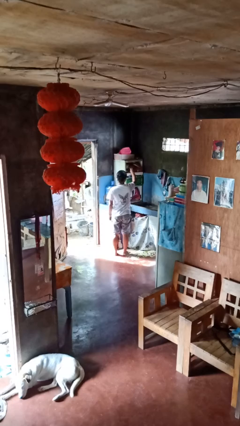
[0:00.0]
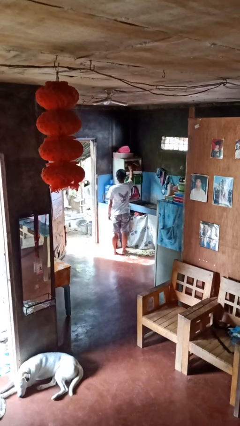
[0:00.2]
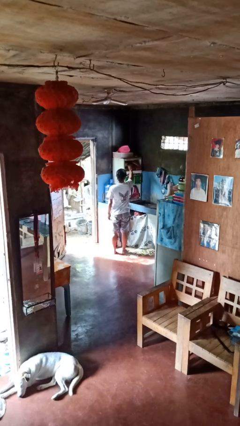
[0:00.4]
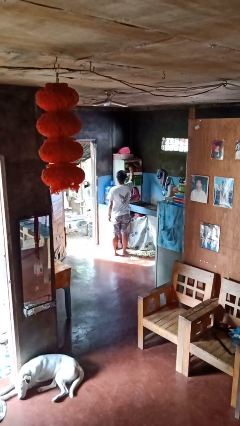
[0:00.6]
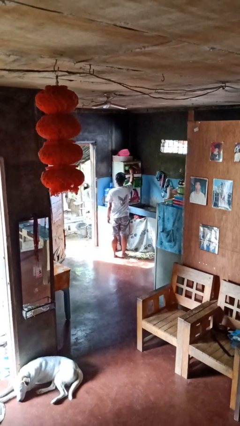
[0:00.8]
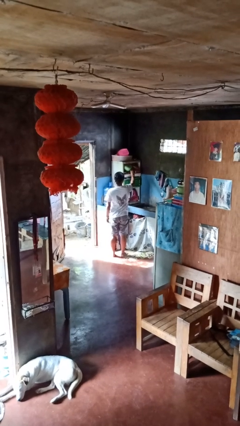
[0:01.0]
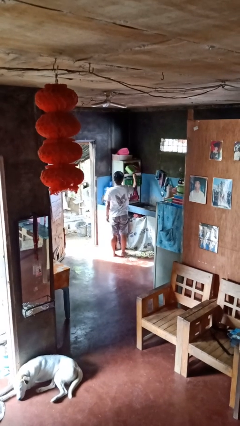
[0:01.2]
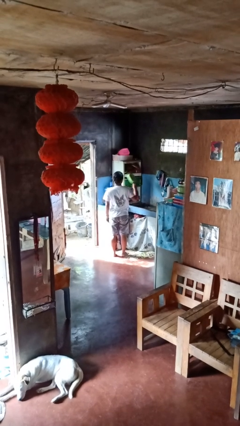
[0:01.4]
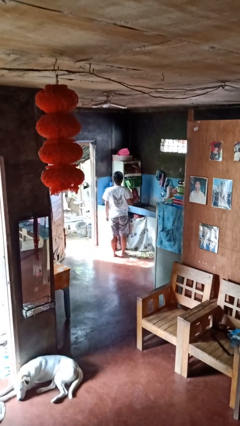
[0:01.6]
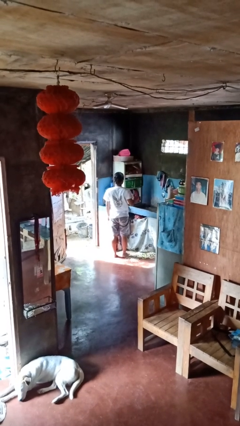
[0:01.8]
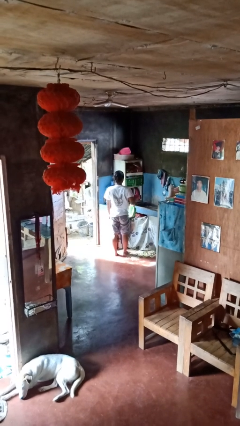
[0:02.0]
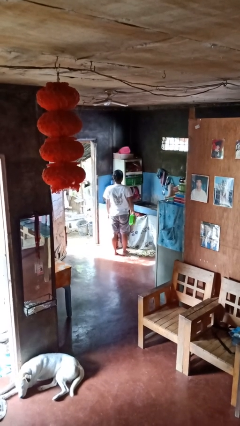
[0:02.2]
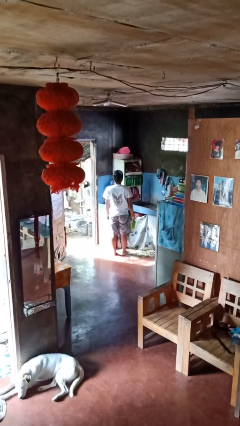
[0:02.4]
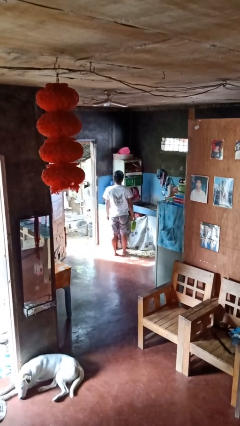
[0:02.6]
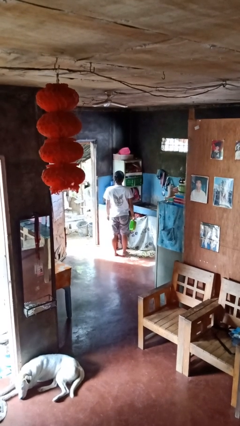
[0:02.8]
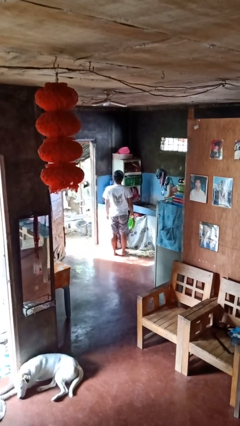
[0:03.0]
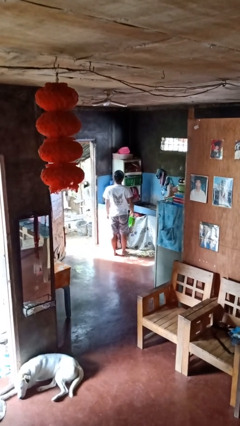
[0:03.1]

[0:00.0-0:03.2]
person takes object from cabinet

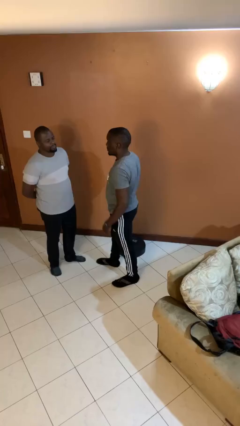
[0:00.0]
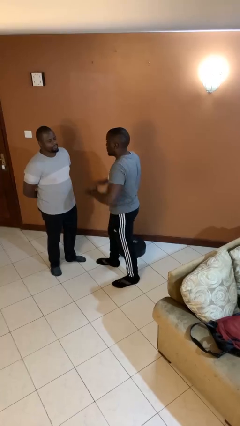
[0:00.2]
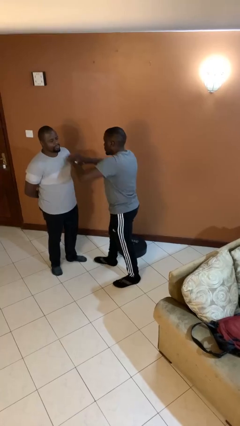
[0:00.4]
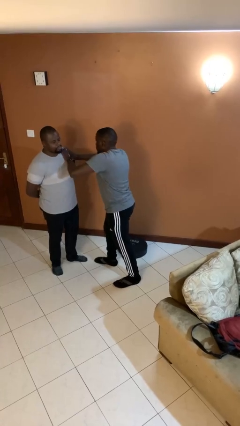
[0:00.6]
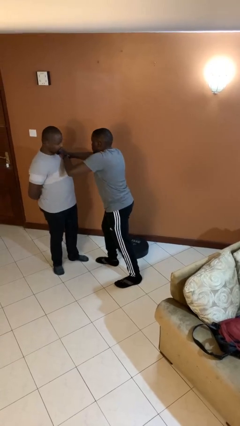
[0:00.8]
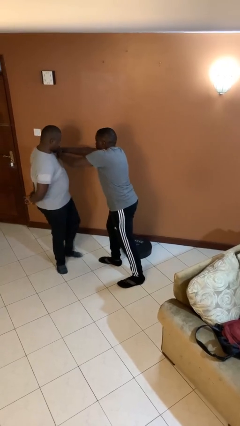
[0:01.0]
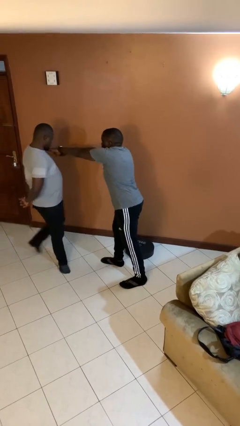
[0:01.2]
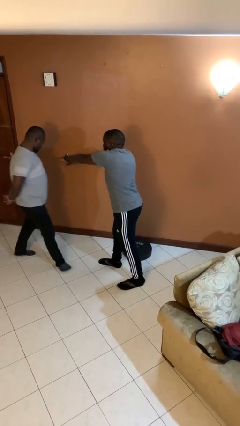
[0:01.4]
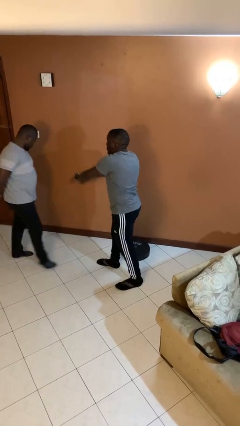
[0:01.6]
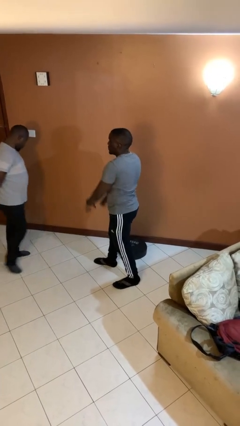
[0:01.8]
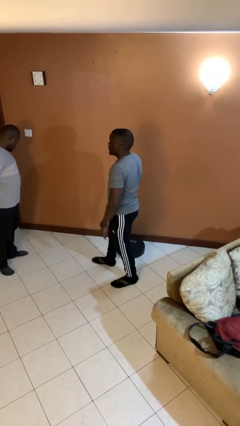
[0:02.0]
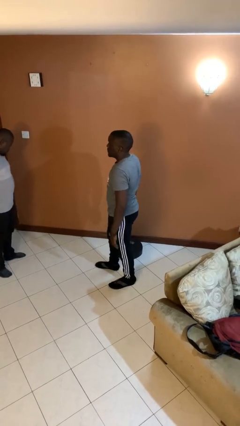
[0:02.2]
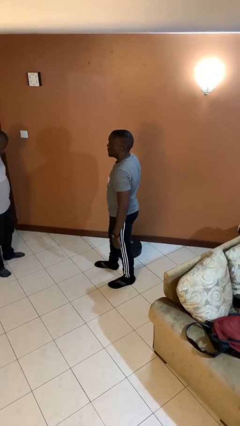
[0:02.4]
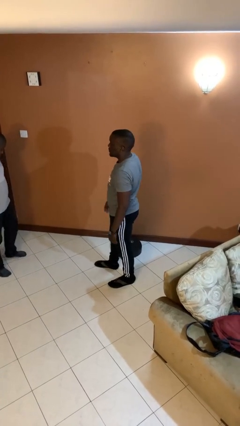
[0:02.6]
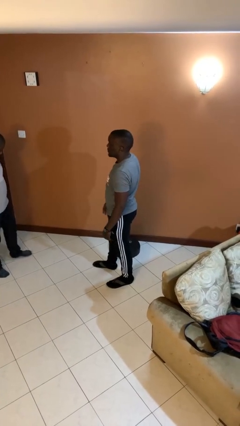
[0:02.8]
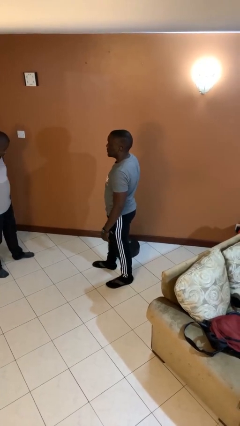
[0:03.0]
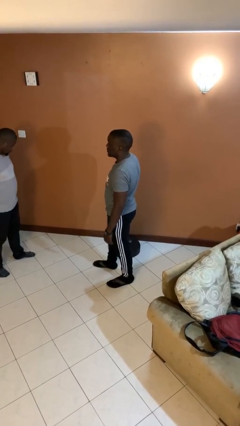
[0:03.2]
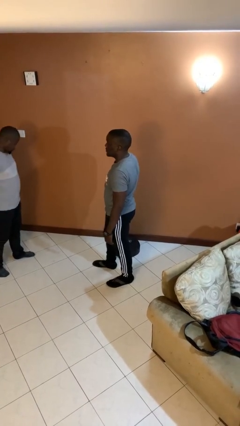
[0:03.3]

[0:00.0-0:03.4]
person shoves person

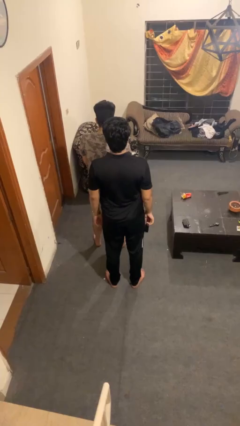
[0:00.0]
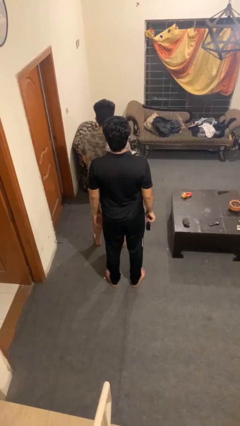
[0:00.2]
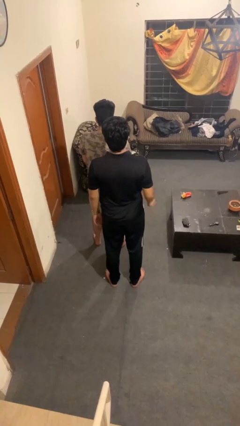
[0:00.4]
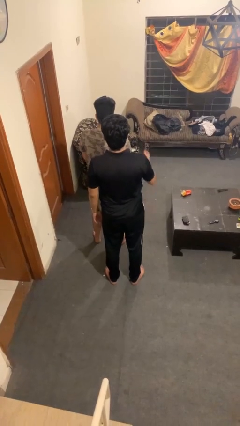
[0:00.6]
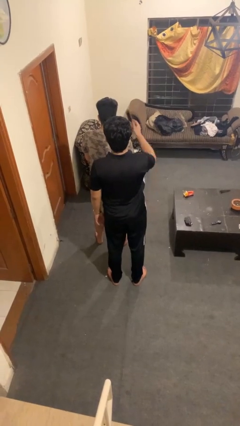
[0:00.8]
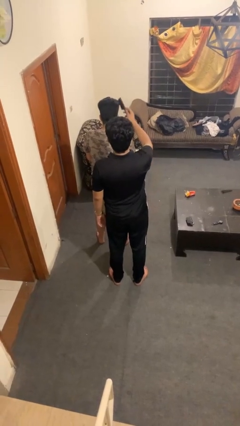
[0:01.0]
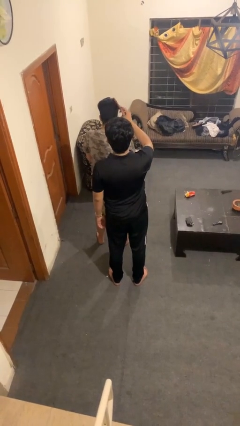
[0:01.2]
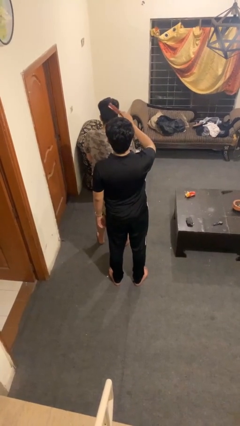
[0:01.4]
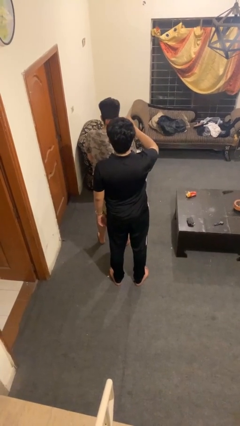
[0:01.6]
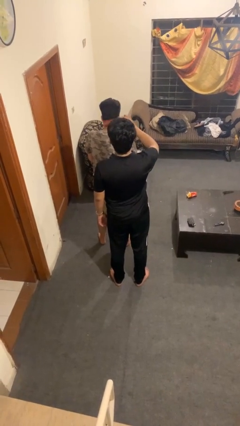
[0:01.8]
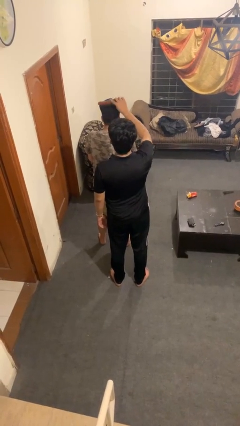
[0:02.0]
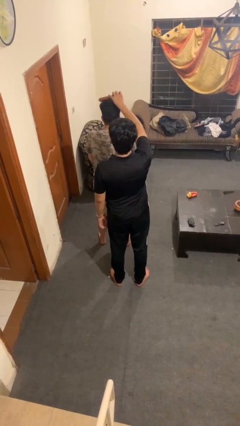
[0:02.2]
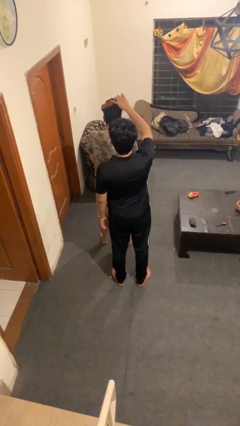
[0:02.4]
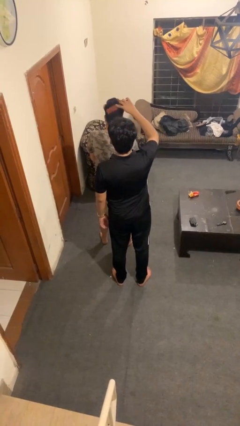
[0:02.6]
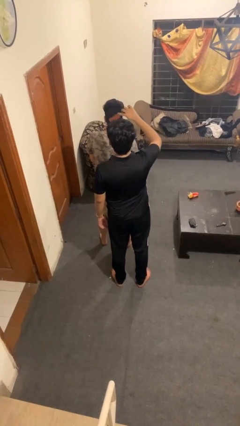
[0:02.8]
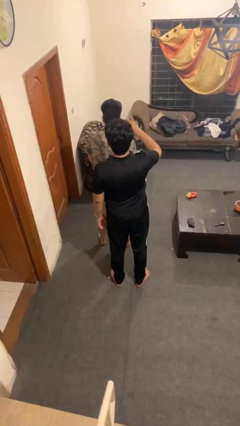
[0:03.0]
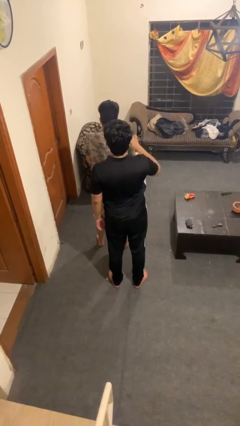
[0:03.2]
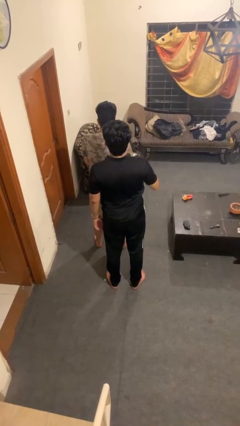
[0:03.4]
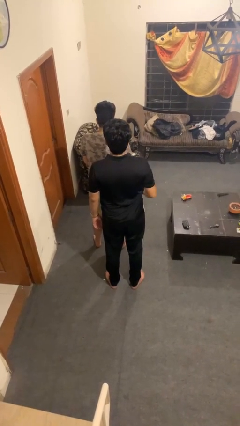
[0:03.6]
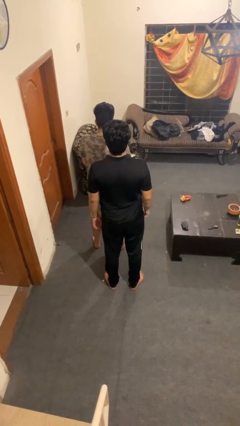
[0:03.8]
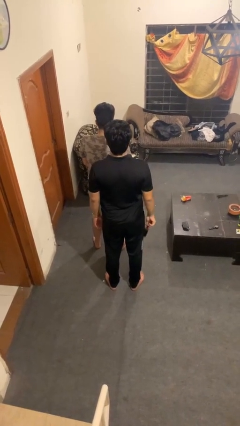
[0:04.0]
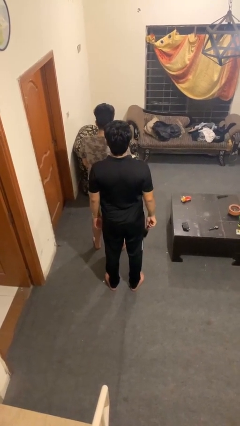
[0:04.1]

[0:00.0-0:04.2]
person brushes hair of person

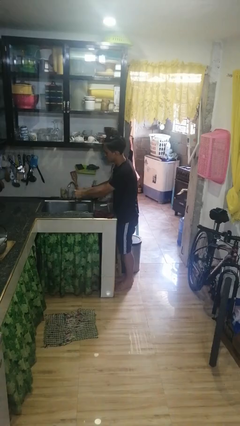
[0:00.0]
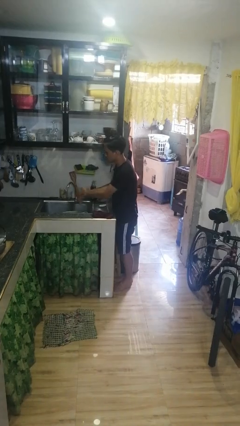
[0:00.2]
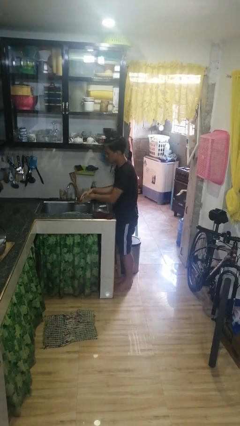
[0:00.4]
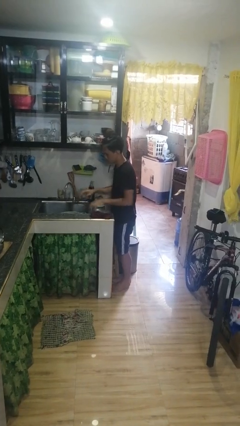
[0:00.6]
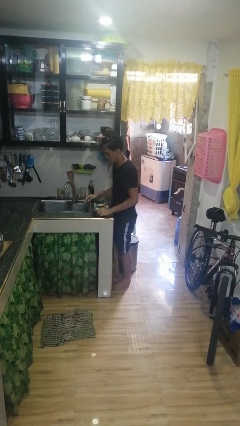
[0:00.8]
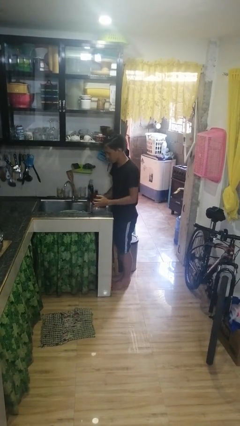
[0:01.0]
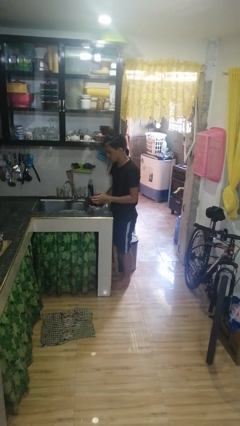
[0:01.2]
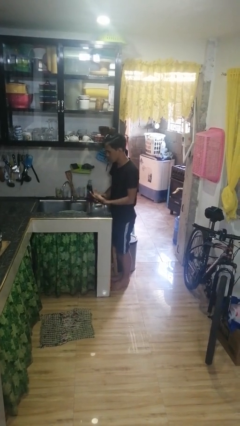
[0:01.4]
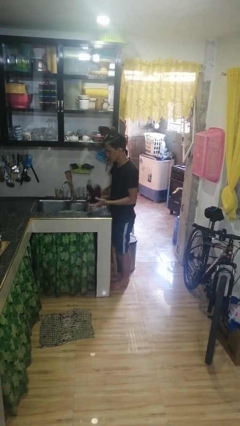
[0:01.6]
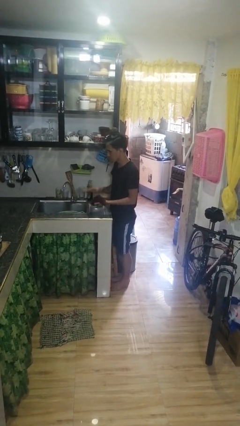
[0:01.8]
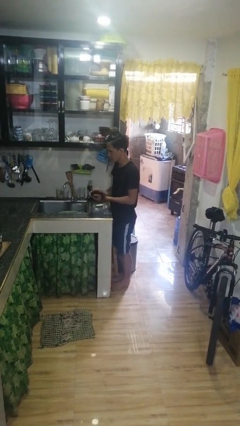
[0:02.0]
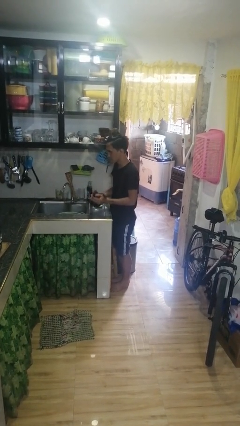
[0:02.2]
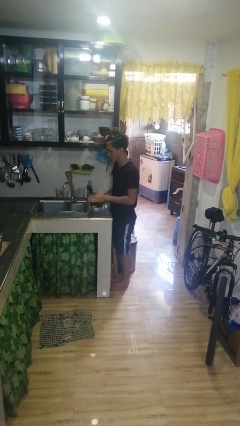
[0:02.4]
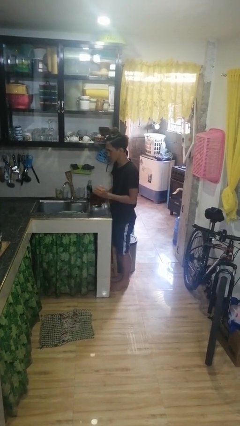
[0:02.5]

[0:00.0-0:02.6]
person dries hands with towel

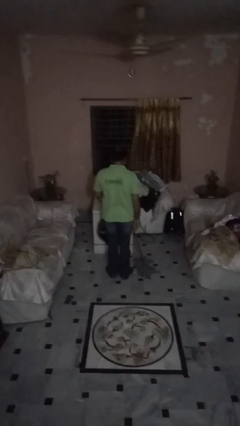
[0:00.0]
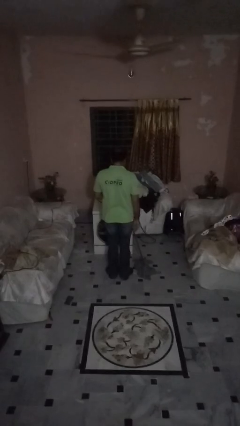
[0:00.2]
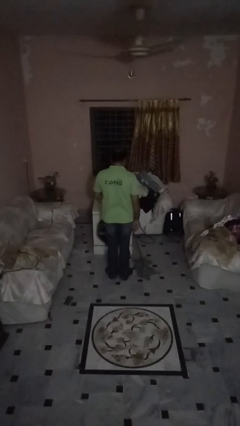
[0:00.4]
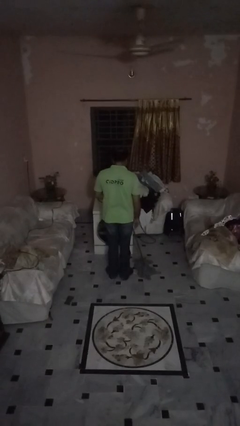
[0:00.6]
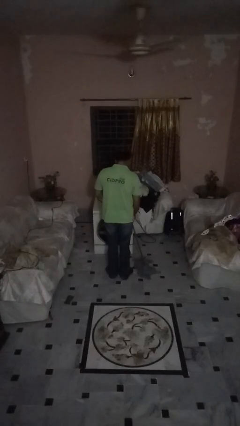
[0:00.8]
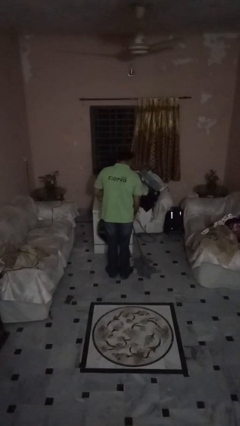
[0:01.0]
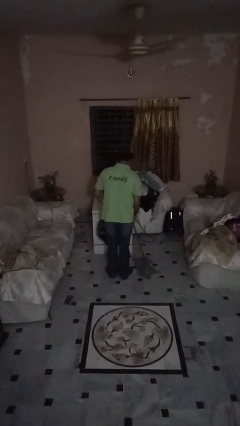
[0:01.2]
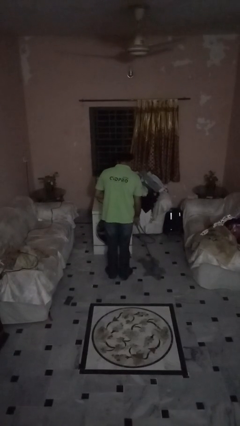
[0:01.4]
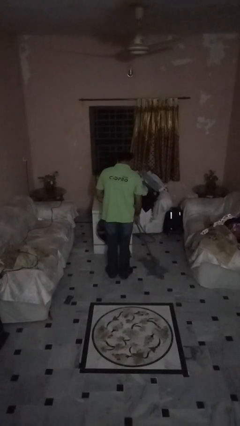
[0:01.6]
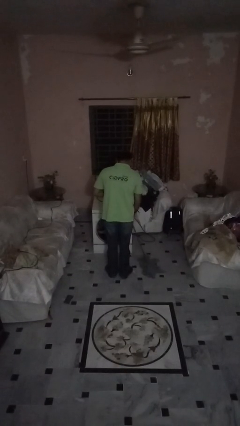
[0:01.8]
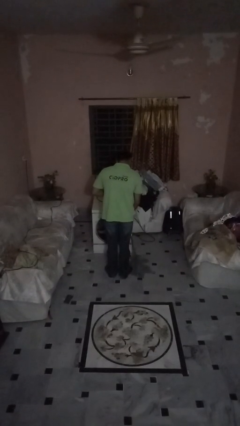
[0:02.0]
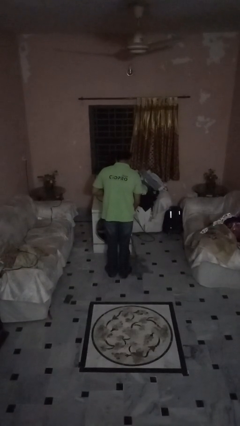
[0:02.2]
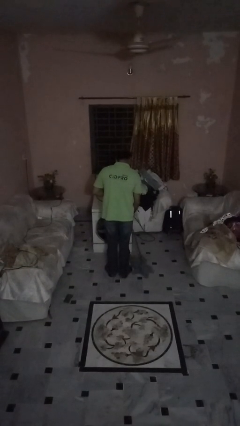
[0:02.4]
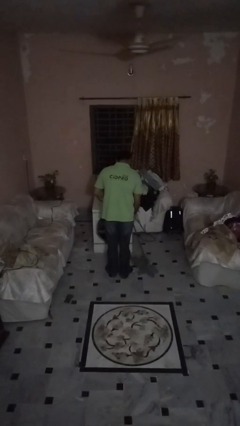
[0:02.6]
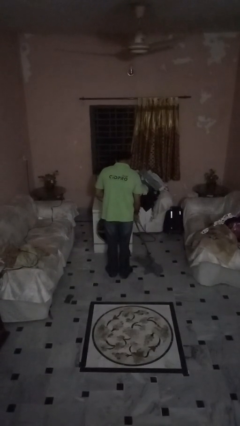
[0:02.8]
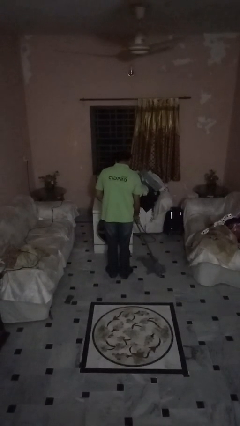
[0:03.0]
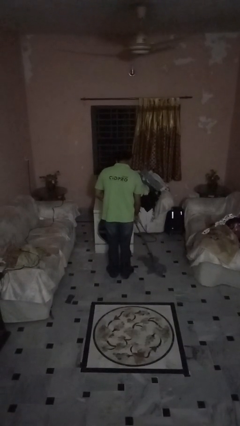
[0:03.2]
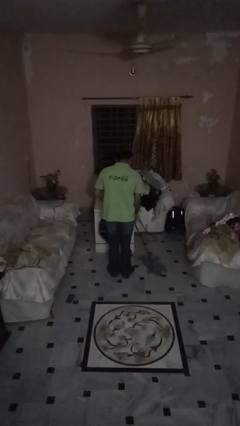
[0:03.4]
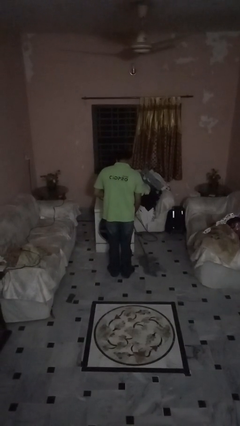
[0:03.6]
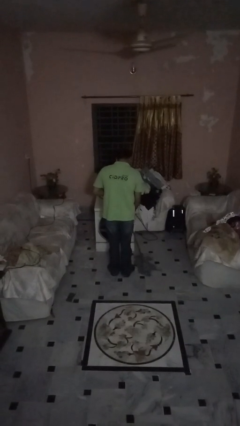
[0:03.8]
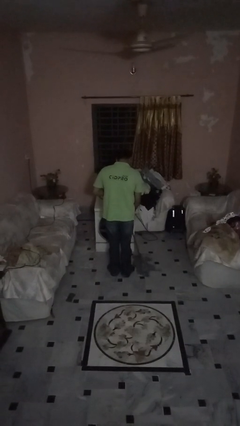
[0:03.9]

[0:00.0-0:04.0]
person mops
